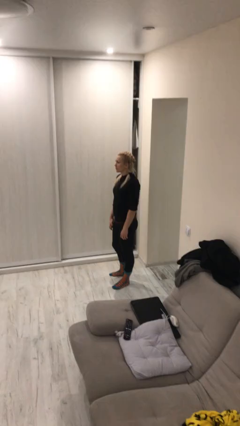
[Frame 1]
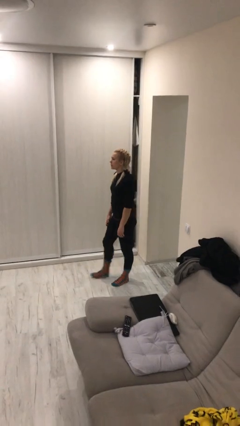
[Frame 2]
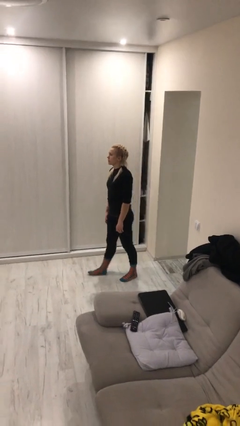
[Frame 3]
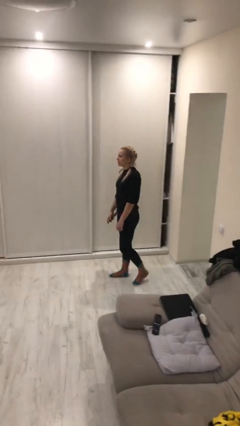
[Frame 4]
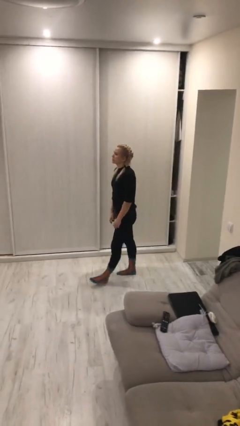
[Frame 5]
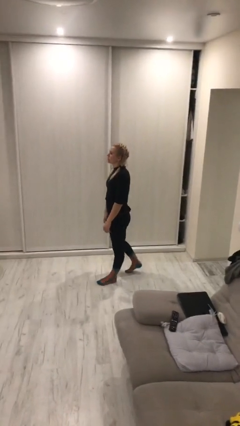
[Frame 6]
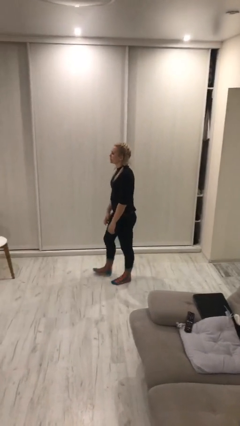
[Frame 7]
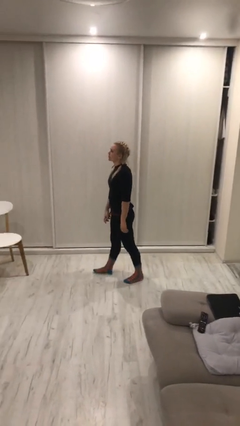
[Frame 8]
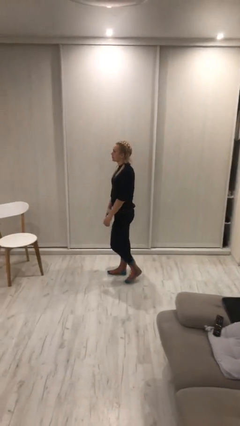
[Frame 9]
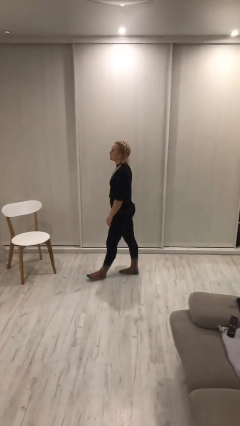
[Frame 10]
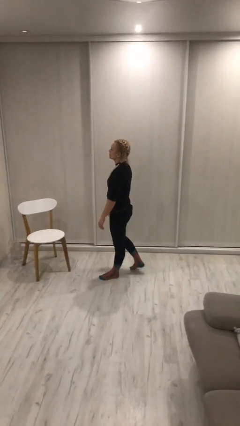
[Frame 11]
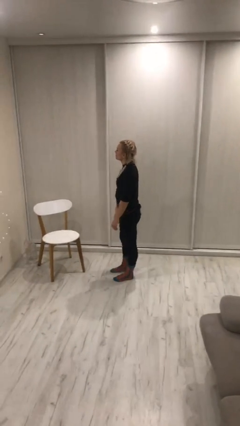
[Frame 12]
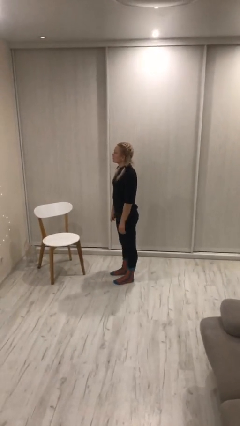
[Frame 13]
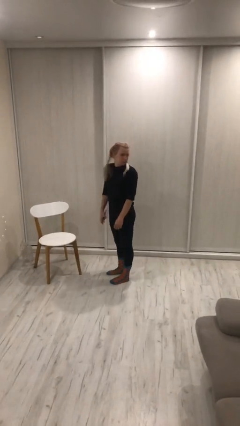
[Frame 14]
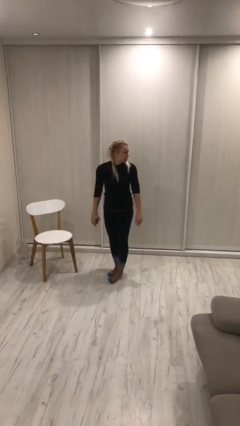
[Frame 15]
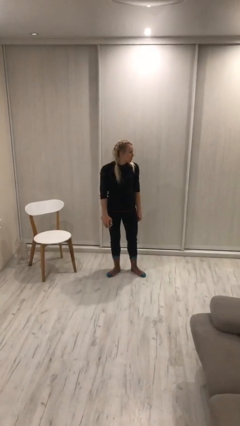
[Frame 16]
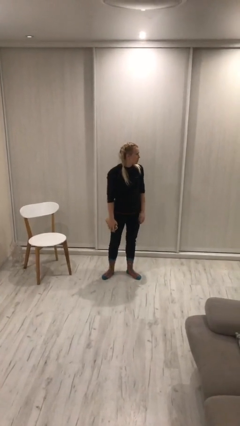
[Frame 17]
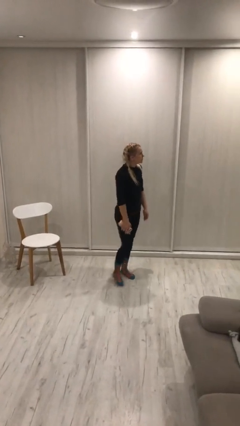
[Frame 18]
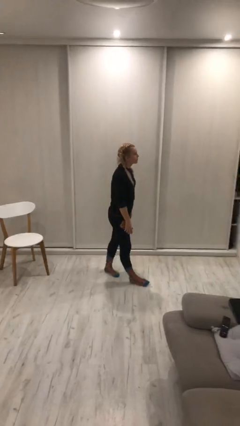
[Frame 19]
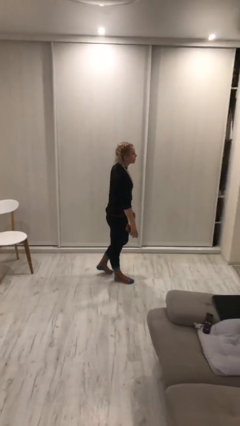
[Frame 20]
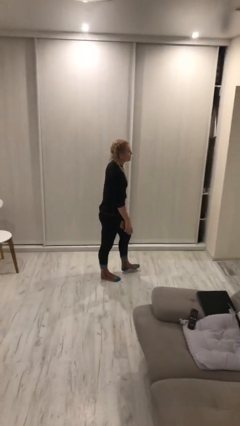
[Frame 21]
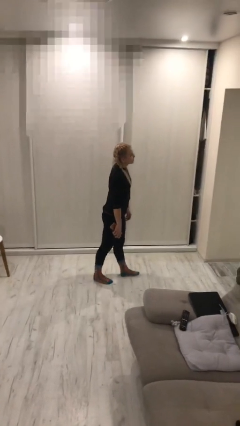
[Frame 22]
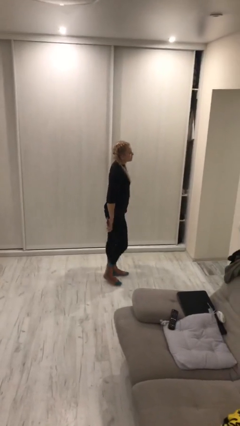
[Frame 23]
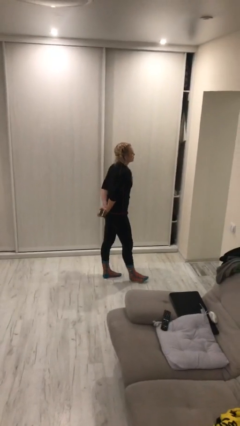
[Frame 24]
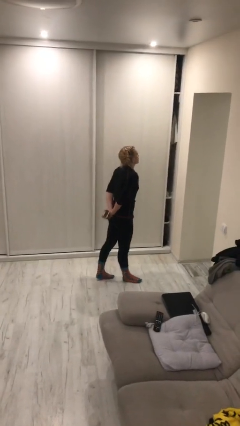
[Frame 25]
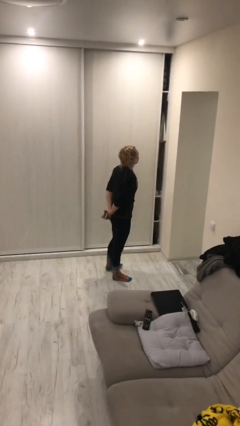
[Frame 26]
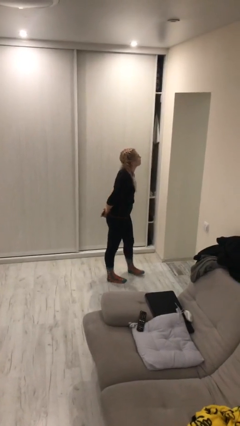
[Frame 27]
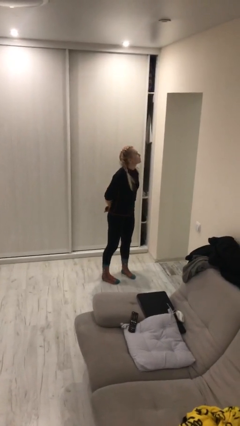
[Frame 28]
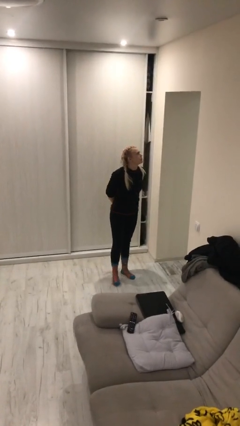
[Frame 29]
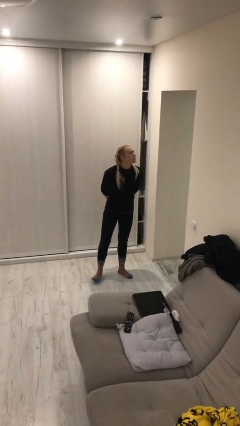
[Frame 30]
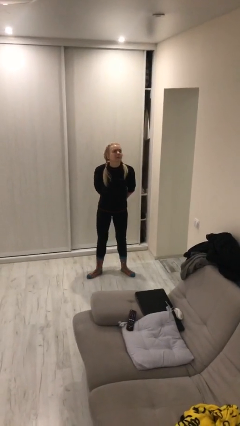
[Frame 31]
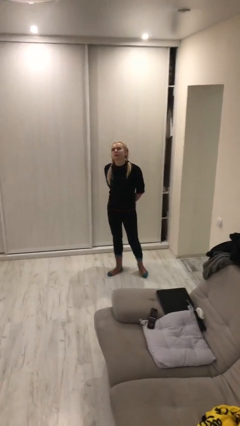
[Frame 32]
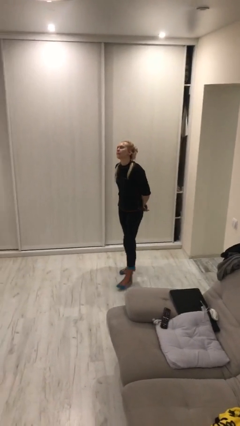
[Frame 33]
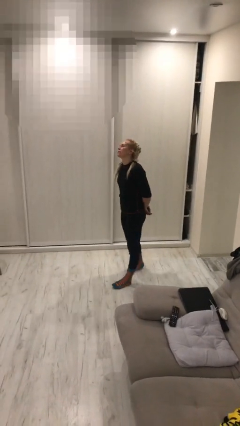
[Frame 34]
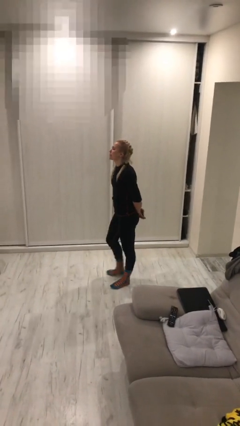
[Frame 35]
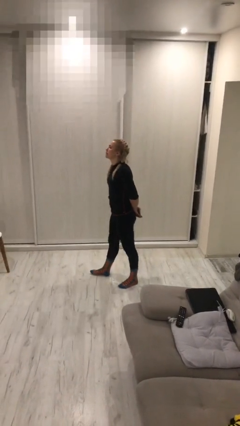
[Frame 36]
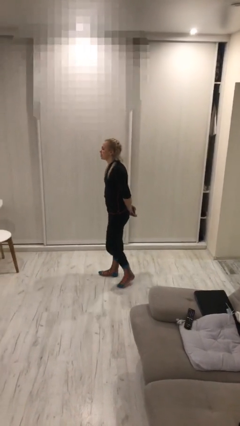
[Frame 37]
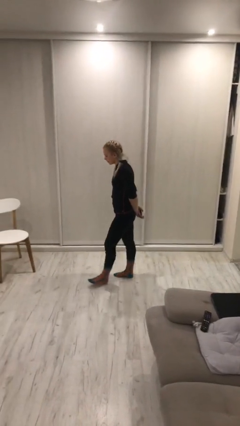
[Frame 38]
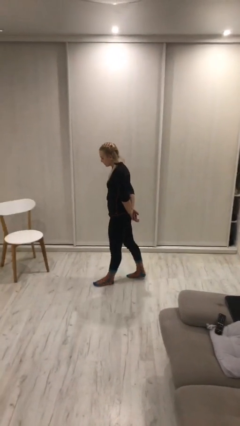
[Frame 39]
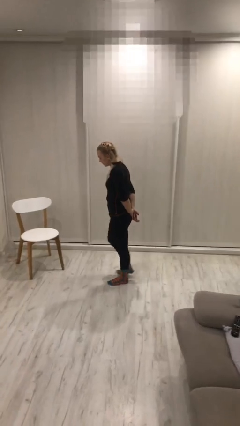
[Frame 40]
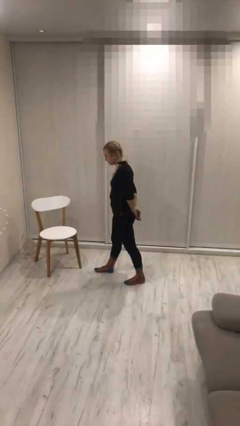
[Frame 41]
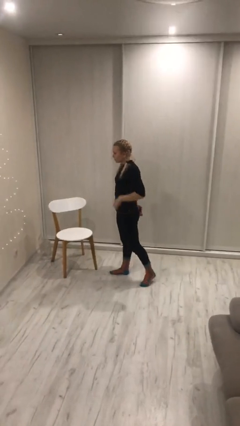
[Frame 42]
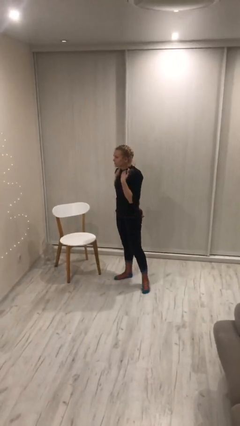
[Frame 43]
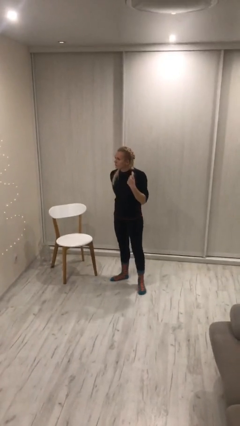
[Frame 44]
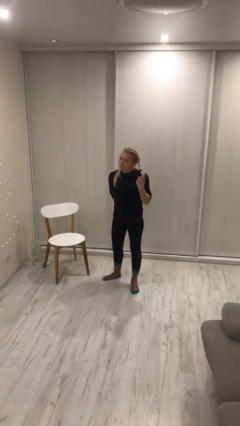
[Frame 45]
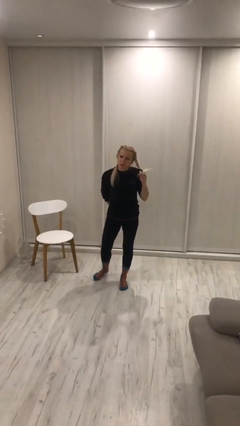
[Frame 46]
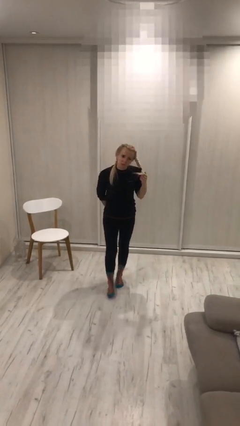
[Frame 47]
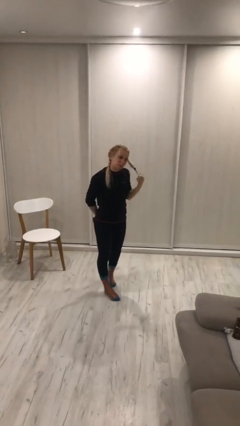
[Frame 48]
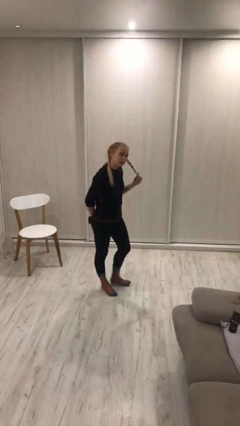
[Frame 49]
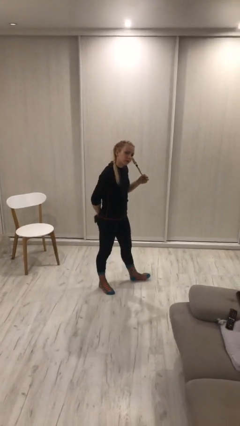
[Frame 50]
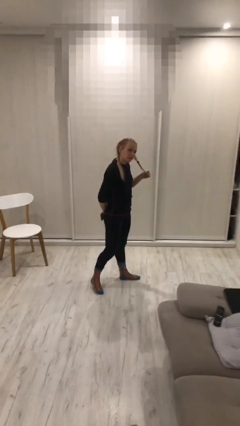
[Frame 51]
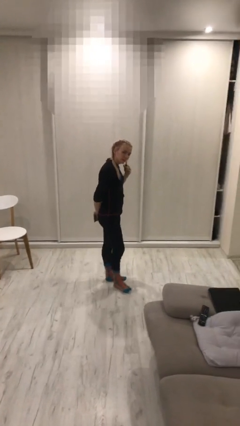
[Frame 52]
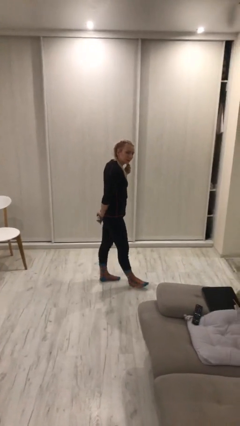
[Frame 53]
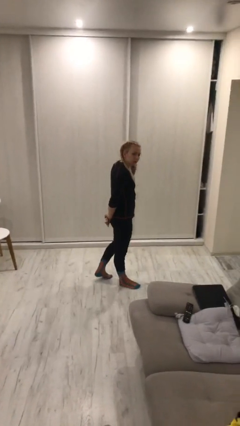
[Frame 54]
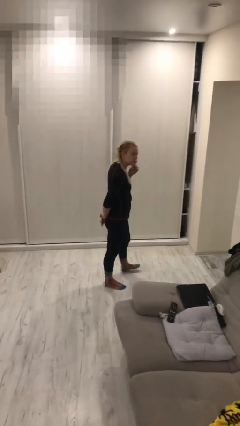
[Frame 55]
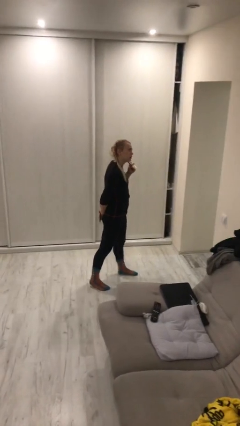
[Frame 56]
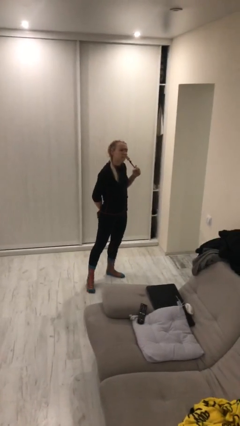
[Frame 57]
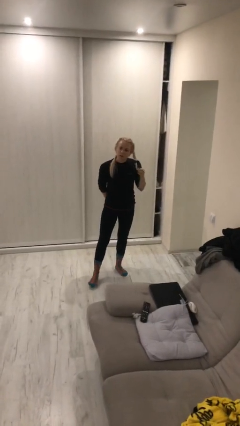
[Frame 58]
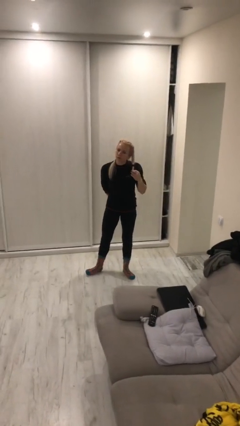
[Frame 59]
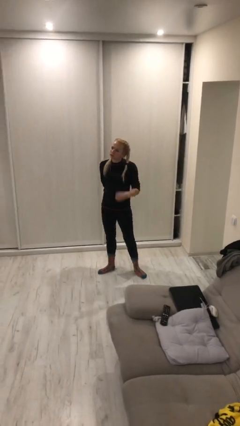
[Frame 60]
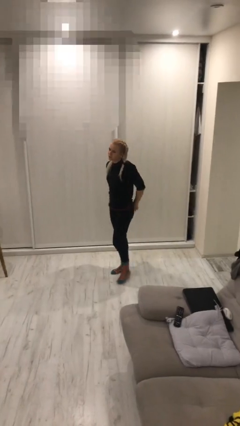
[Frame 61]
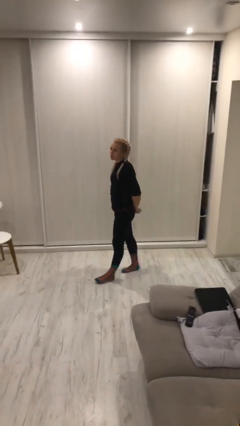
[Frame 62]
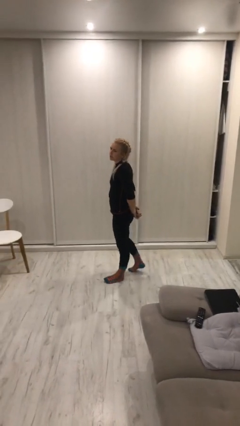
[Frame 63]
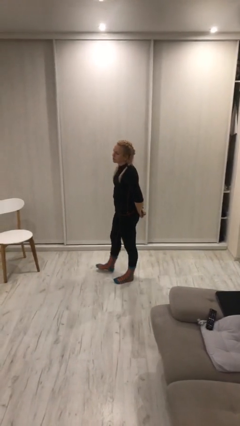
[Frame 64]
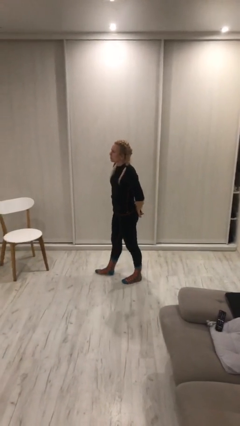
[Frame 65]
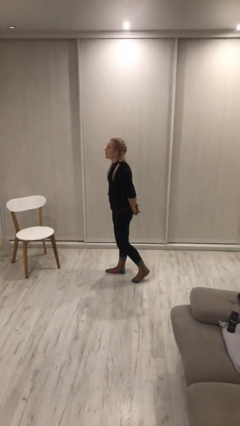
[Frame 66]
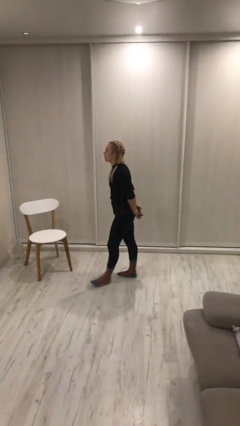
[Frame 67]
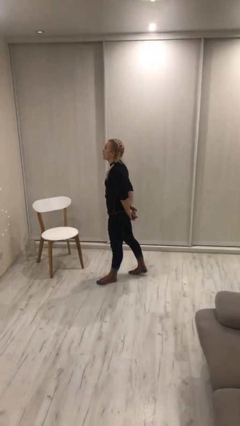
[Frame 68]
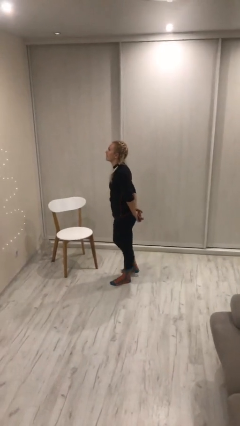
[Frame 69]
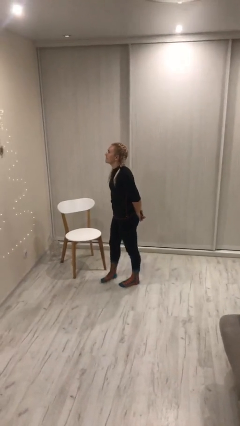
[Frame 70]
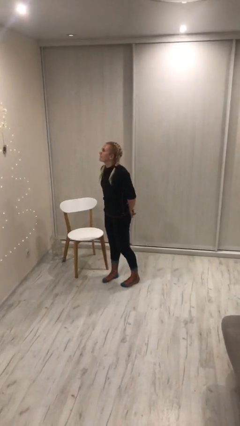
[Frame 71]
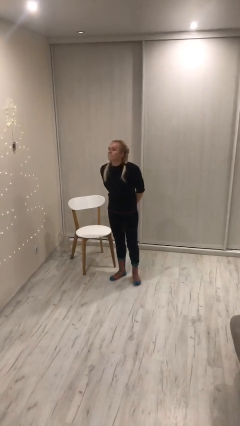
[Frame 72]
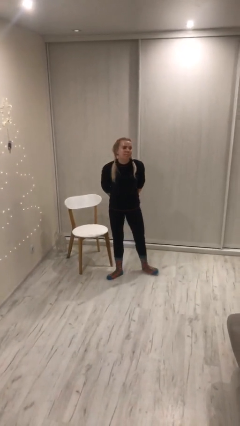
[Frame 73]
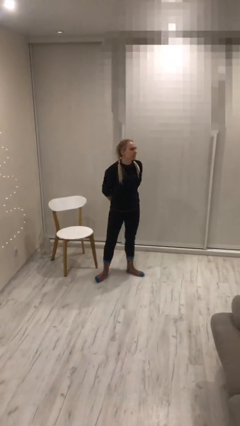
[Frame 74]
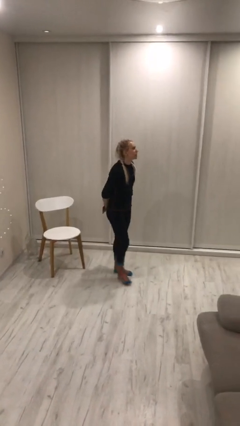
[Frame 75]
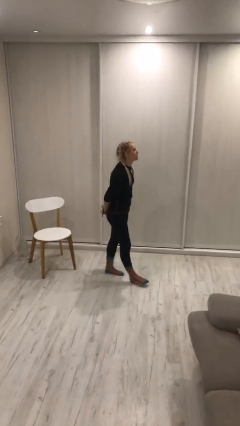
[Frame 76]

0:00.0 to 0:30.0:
person walks

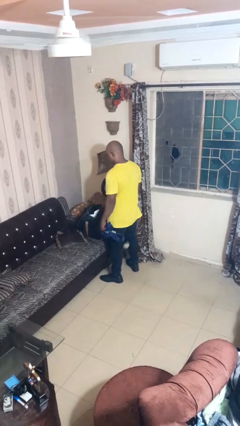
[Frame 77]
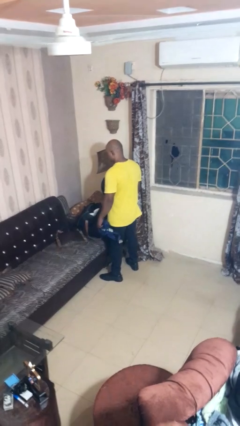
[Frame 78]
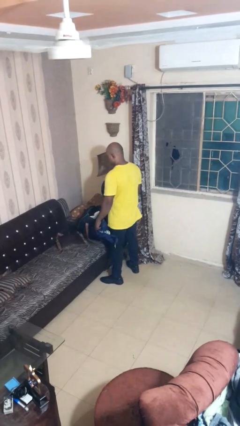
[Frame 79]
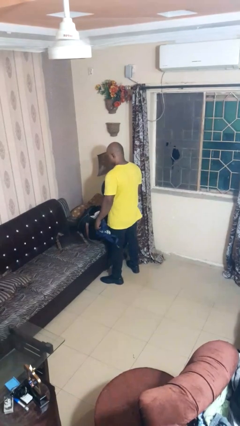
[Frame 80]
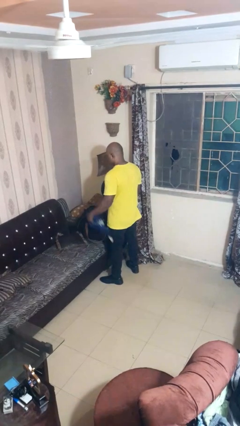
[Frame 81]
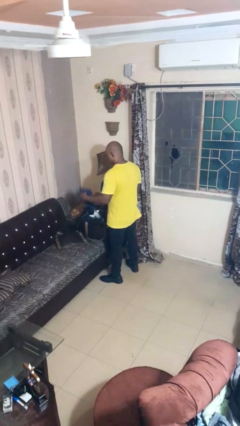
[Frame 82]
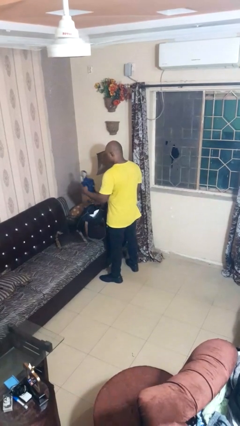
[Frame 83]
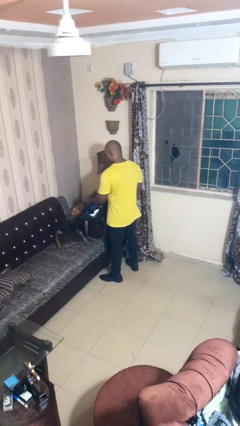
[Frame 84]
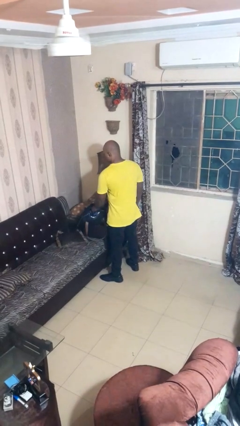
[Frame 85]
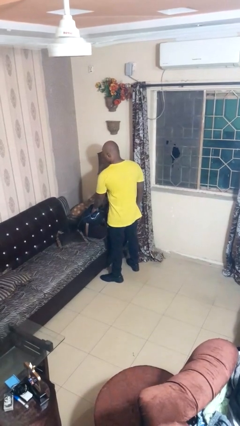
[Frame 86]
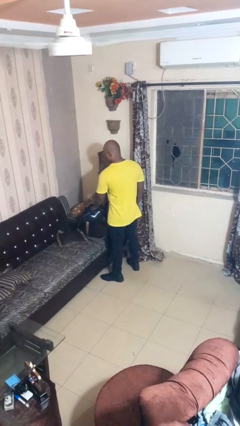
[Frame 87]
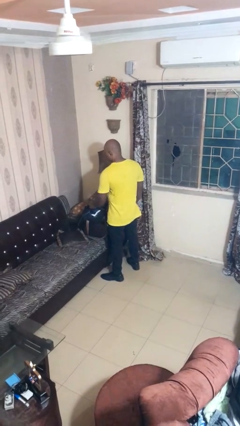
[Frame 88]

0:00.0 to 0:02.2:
person puts object into bag

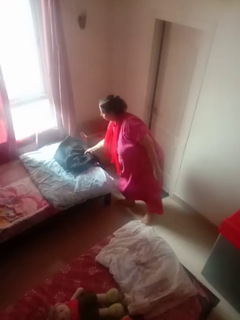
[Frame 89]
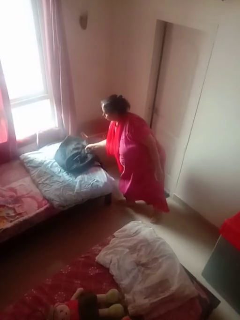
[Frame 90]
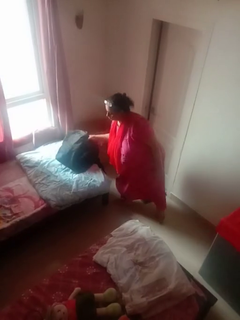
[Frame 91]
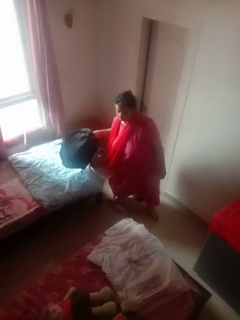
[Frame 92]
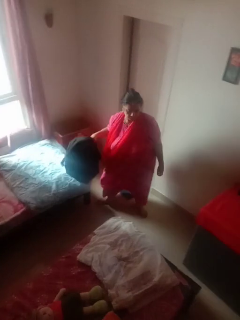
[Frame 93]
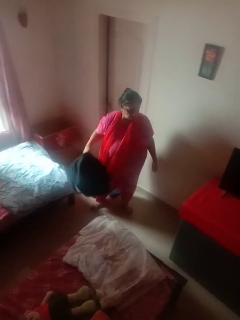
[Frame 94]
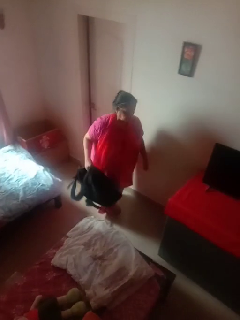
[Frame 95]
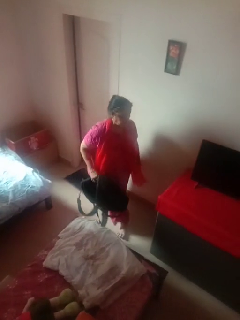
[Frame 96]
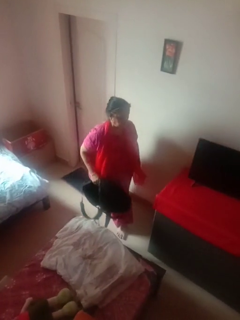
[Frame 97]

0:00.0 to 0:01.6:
person picks up object from bed
